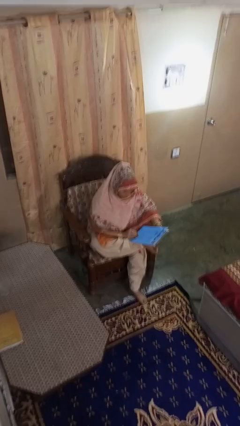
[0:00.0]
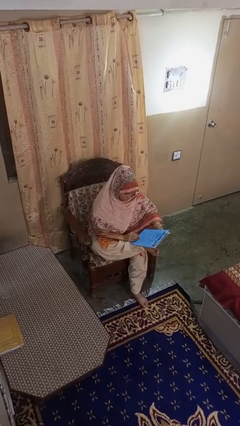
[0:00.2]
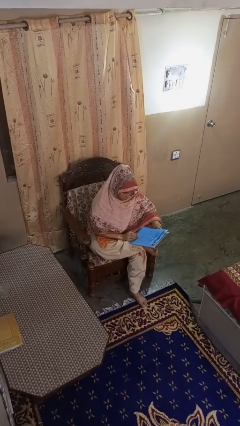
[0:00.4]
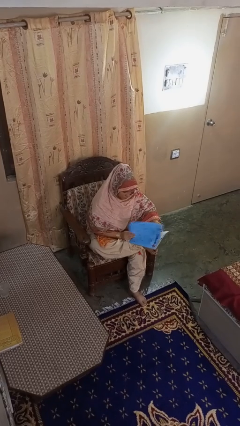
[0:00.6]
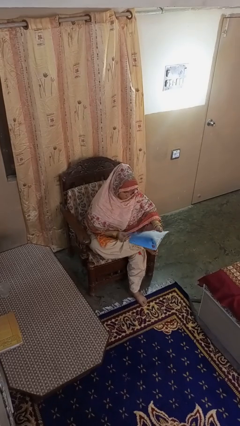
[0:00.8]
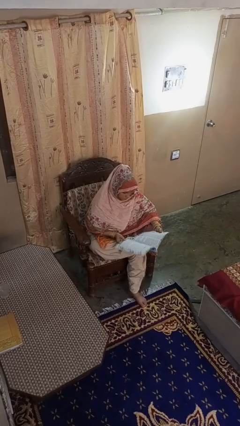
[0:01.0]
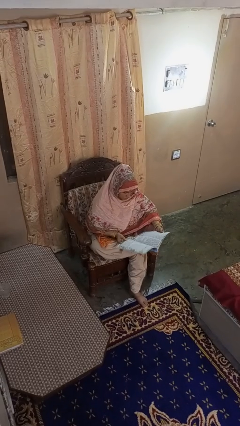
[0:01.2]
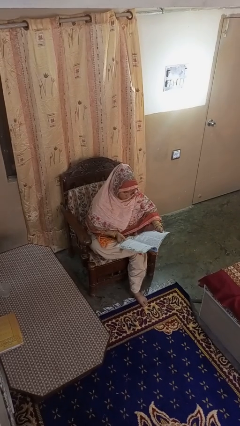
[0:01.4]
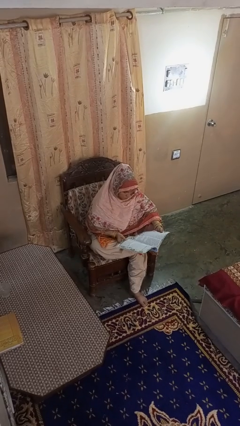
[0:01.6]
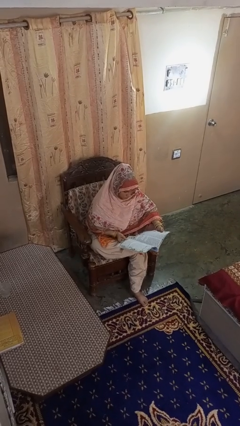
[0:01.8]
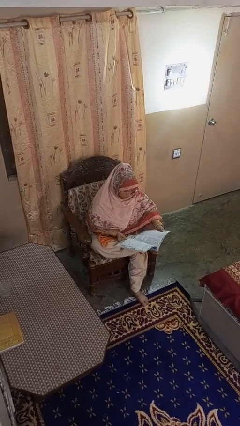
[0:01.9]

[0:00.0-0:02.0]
person reads magazine

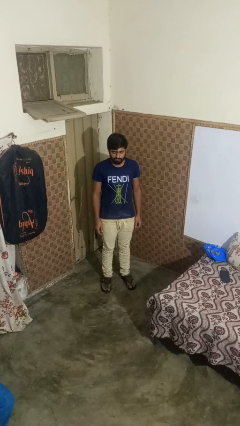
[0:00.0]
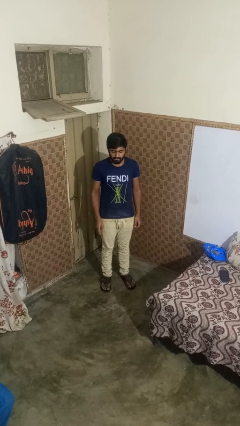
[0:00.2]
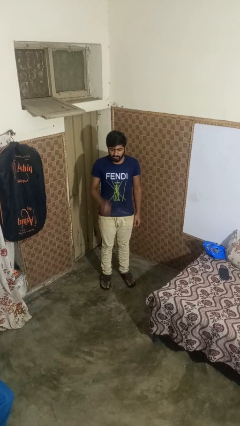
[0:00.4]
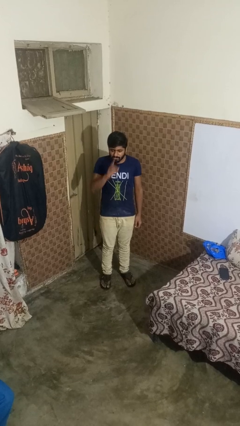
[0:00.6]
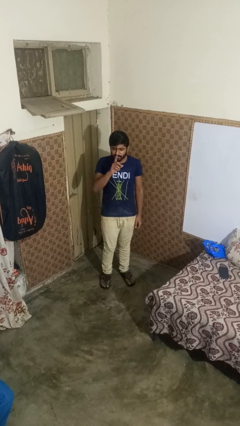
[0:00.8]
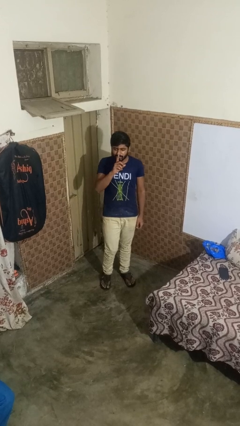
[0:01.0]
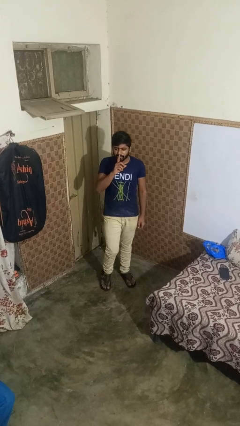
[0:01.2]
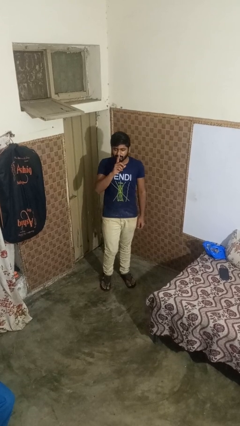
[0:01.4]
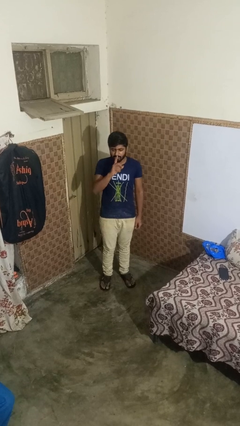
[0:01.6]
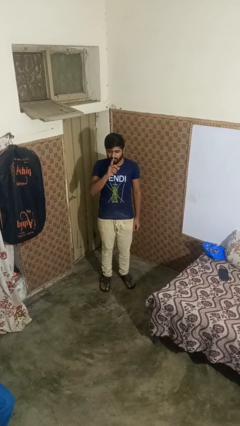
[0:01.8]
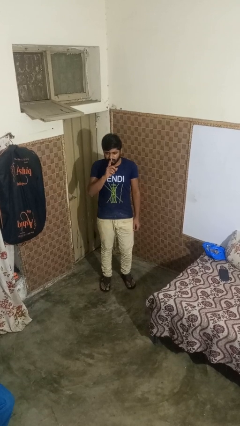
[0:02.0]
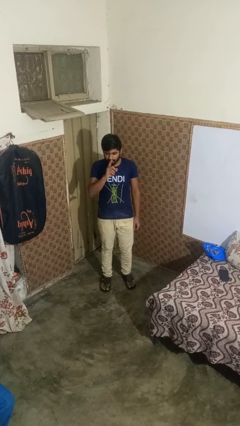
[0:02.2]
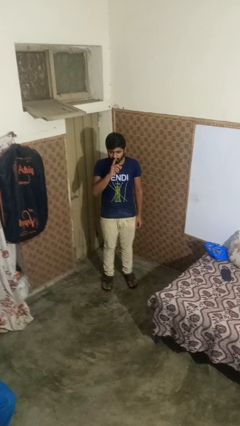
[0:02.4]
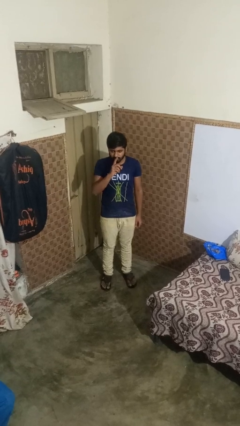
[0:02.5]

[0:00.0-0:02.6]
person gestures be quiet

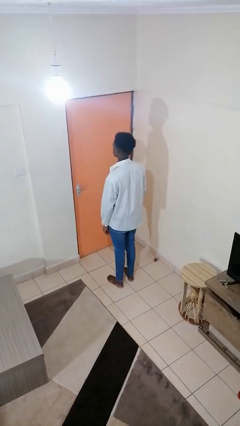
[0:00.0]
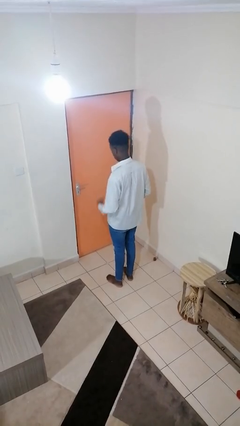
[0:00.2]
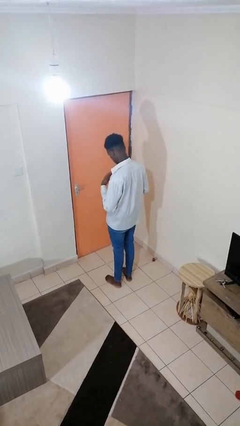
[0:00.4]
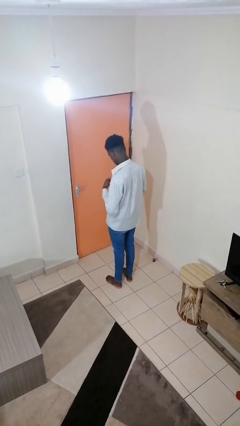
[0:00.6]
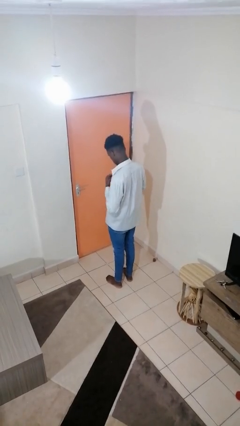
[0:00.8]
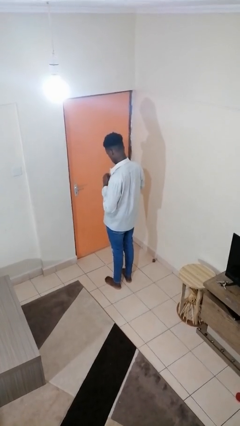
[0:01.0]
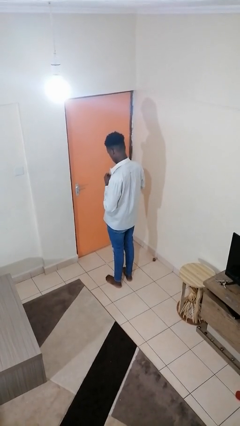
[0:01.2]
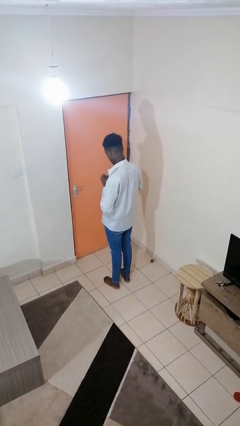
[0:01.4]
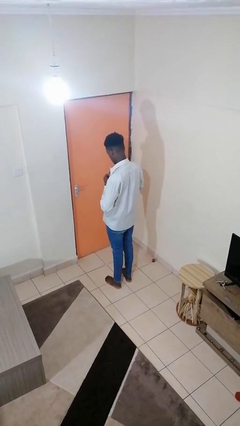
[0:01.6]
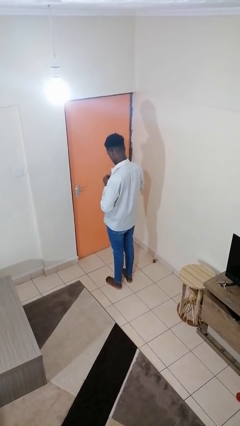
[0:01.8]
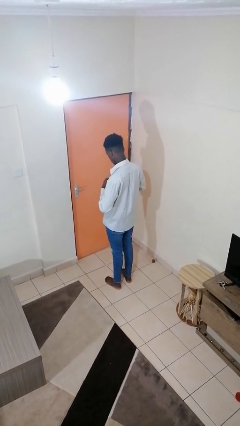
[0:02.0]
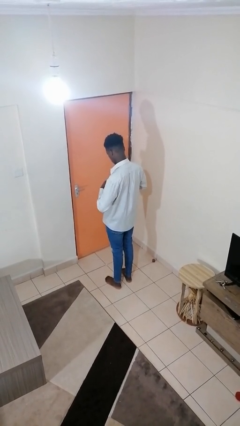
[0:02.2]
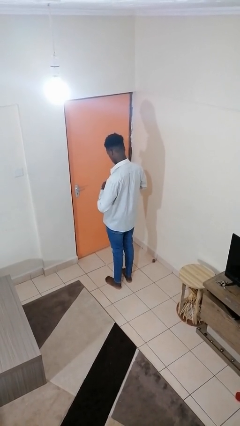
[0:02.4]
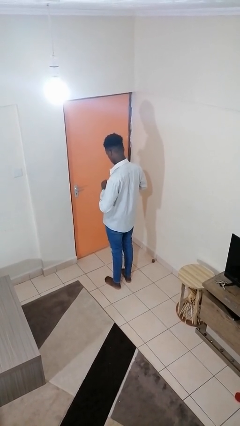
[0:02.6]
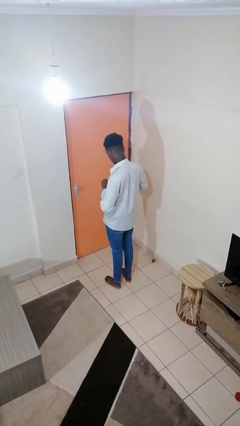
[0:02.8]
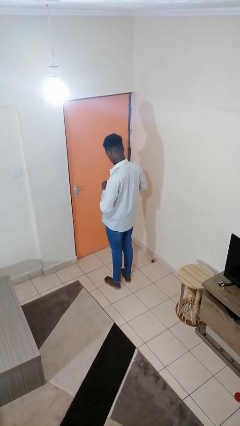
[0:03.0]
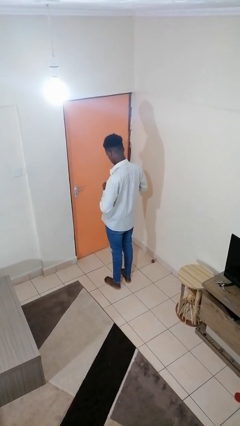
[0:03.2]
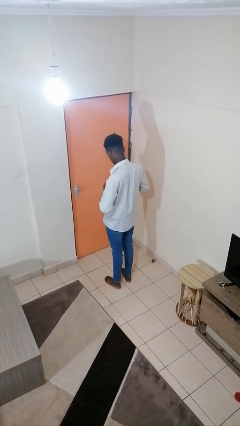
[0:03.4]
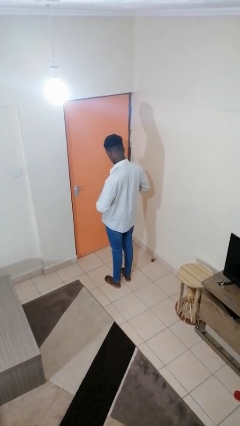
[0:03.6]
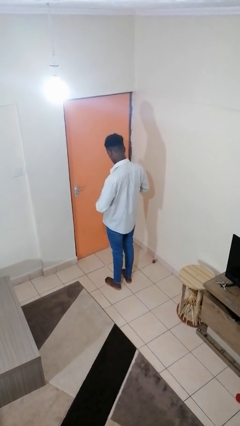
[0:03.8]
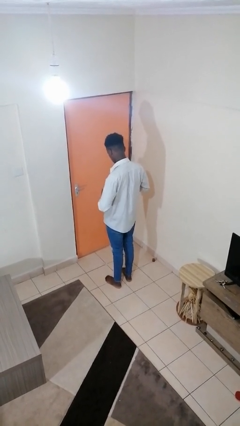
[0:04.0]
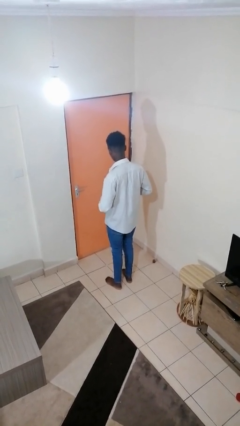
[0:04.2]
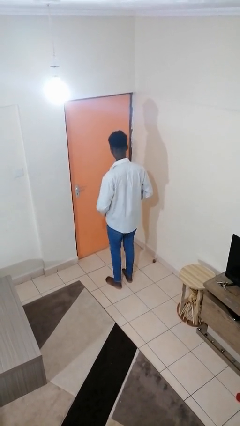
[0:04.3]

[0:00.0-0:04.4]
person buttons shirt

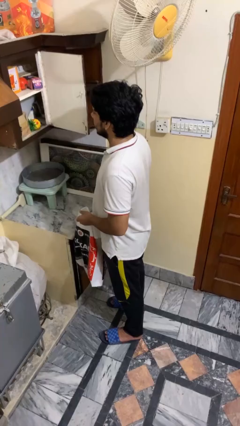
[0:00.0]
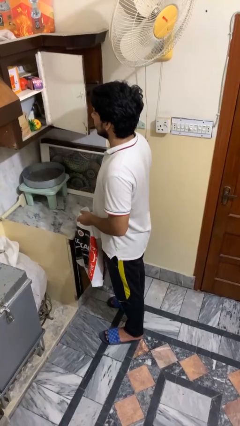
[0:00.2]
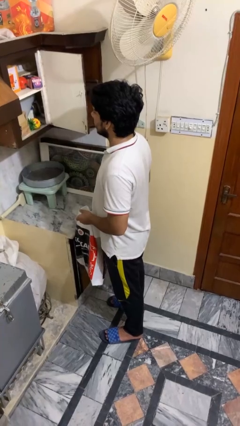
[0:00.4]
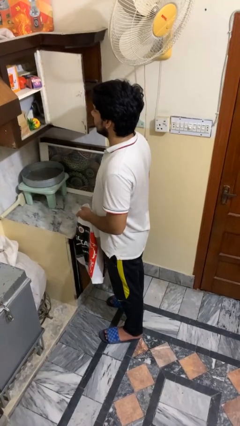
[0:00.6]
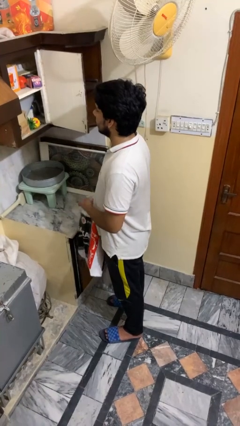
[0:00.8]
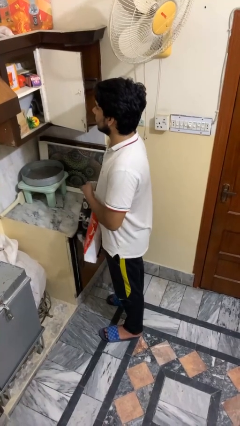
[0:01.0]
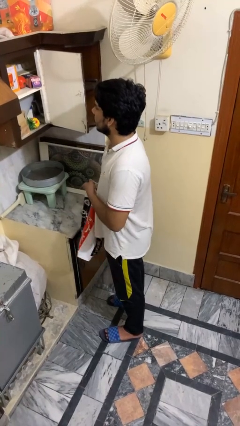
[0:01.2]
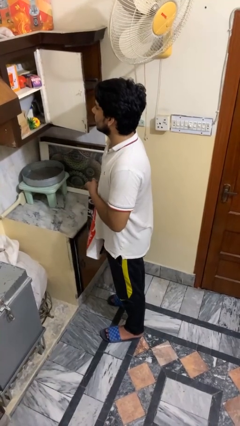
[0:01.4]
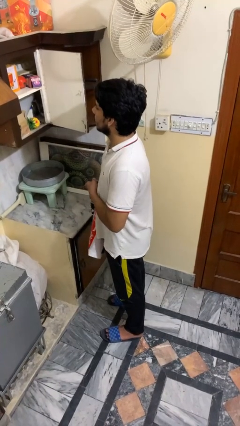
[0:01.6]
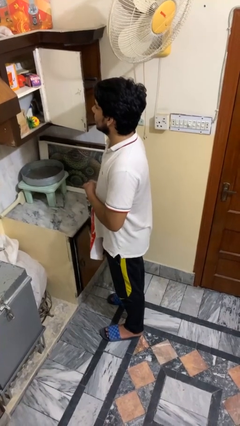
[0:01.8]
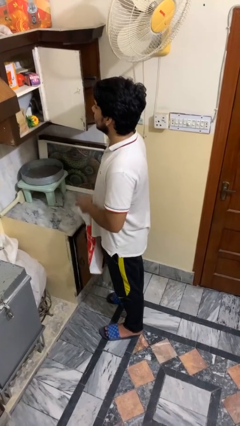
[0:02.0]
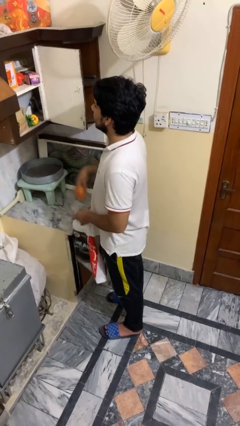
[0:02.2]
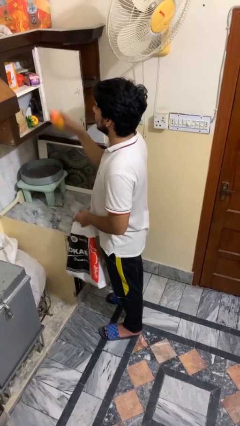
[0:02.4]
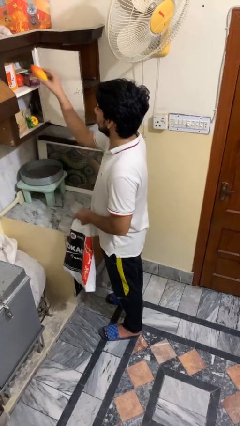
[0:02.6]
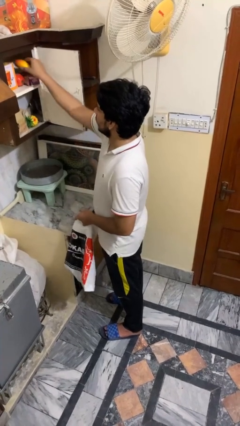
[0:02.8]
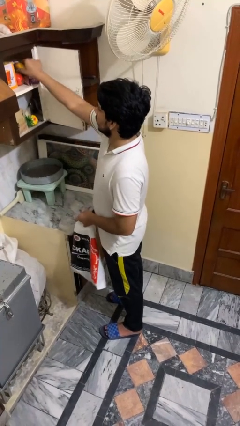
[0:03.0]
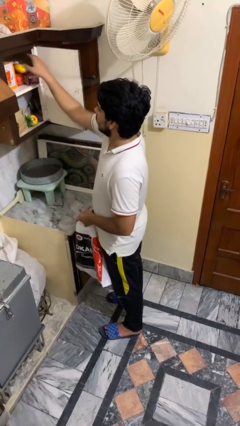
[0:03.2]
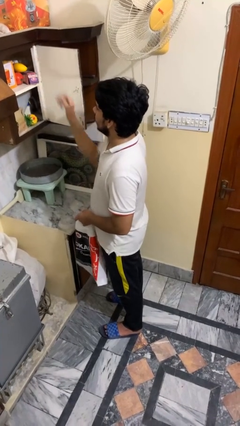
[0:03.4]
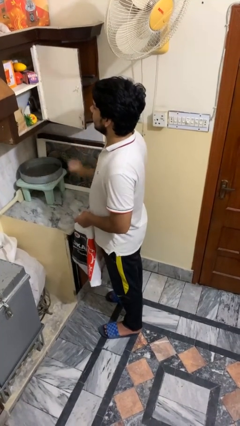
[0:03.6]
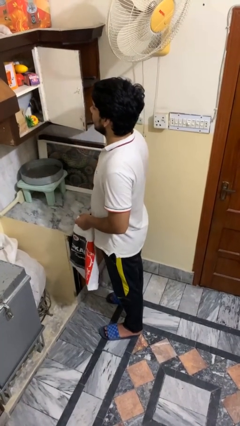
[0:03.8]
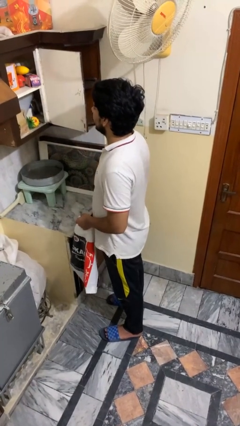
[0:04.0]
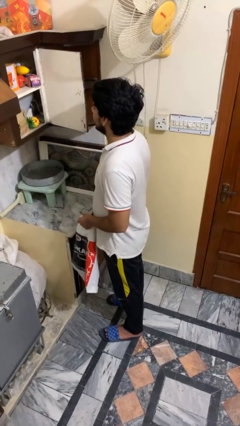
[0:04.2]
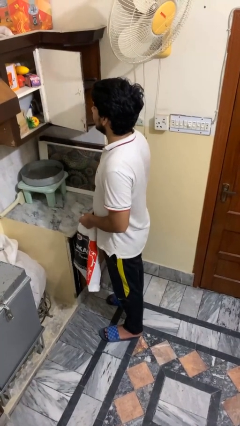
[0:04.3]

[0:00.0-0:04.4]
person loads groceries into cabinet

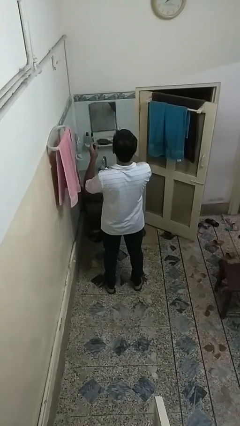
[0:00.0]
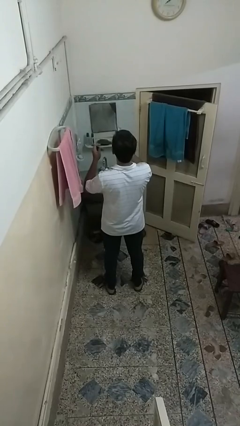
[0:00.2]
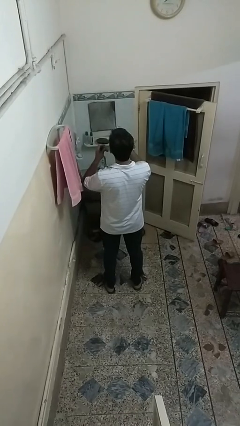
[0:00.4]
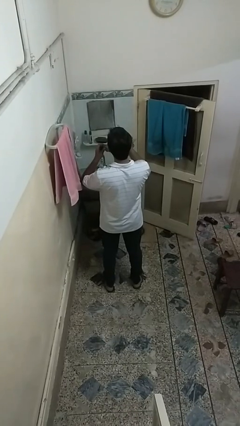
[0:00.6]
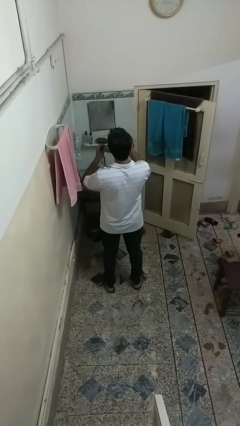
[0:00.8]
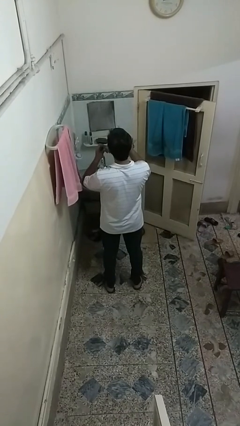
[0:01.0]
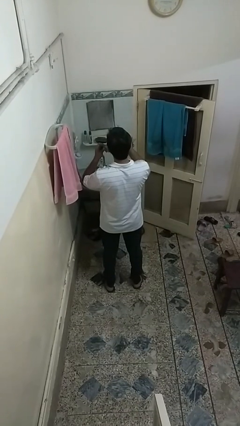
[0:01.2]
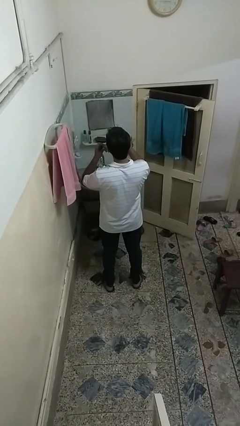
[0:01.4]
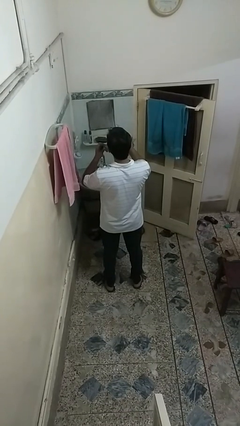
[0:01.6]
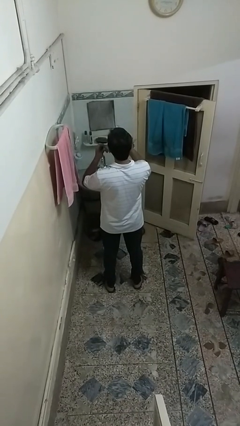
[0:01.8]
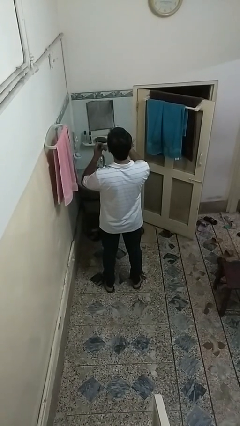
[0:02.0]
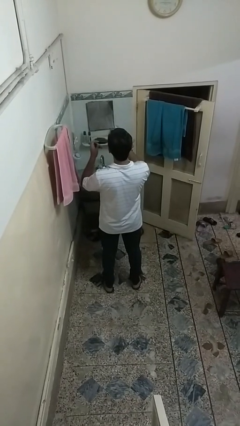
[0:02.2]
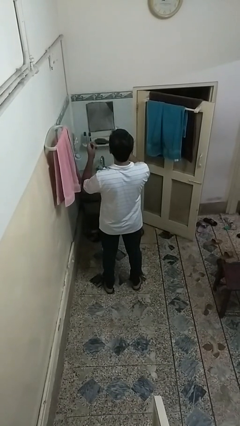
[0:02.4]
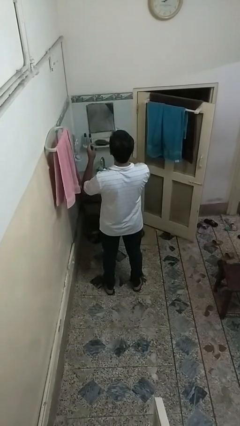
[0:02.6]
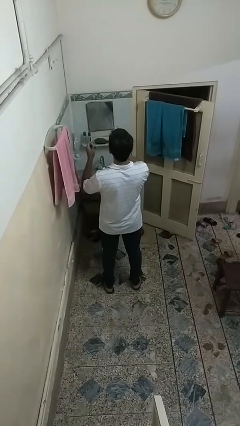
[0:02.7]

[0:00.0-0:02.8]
person flosses

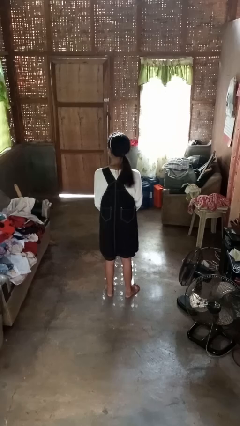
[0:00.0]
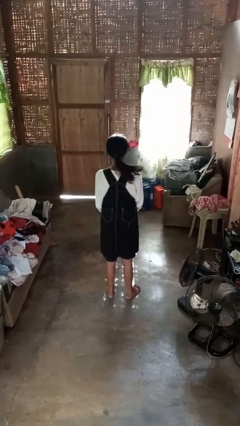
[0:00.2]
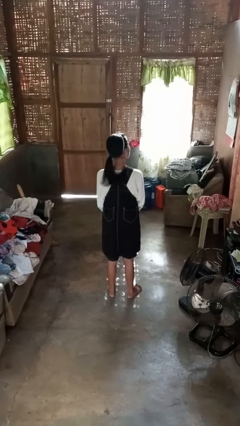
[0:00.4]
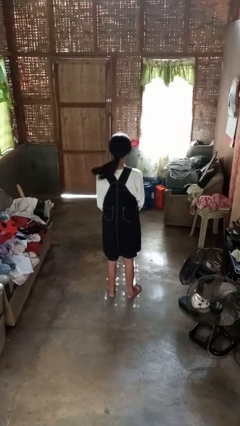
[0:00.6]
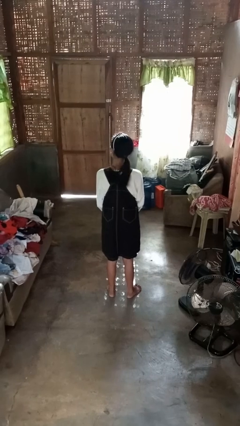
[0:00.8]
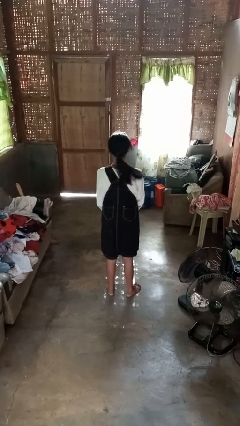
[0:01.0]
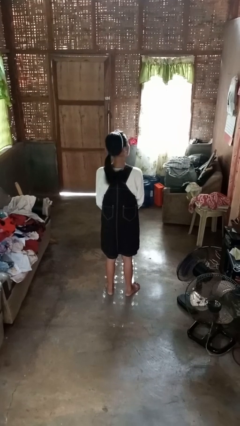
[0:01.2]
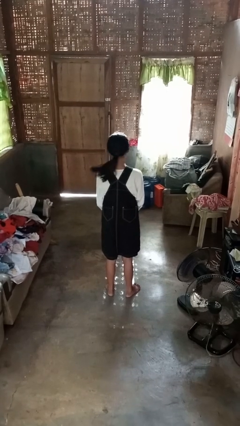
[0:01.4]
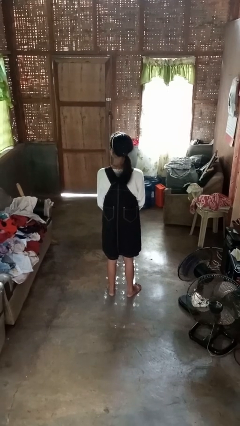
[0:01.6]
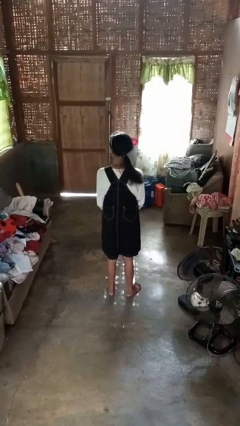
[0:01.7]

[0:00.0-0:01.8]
person shakes head
